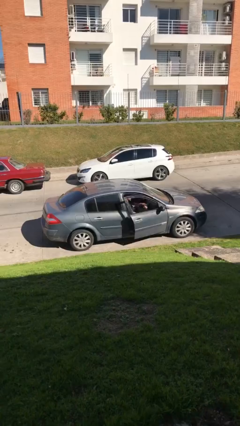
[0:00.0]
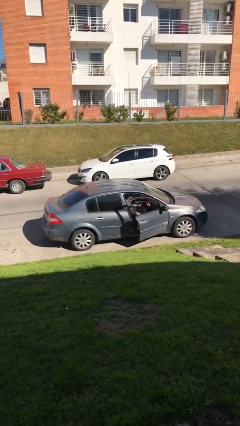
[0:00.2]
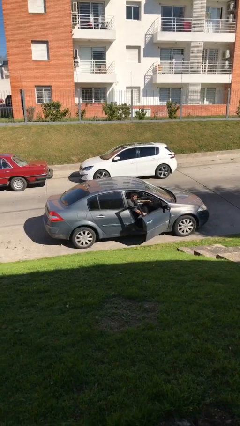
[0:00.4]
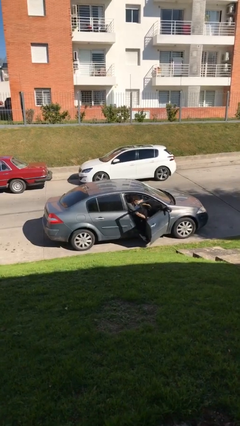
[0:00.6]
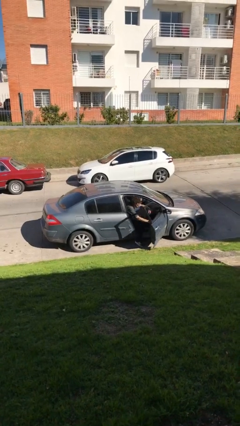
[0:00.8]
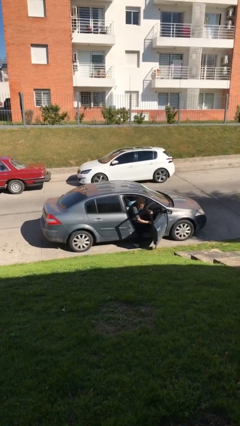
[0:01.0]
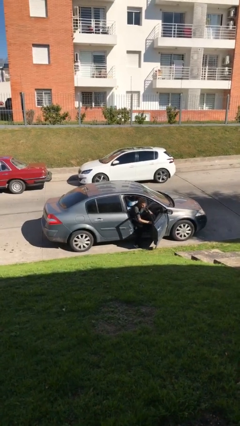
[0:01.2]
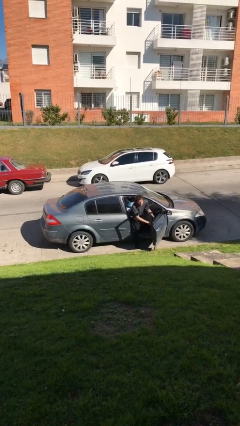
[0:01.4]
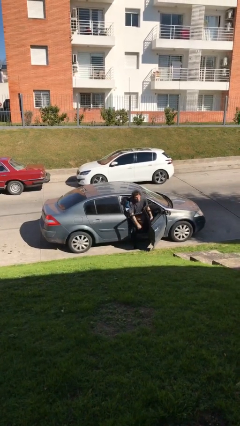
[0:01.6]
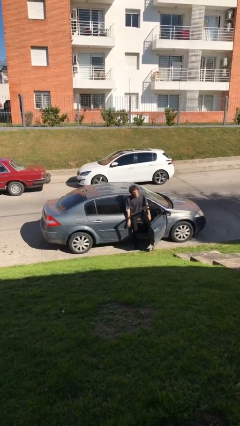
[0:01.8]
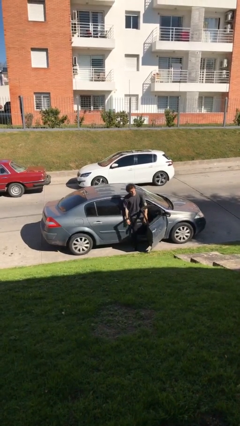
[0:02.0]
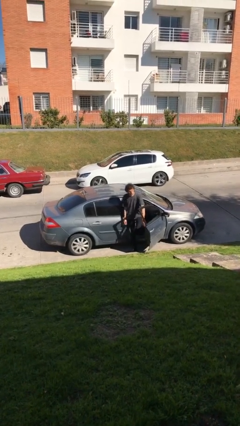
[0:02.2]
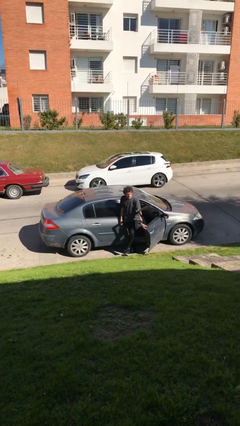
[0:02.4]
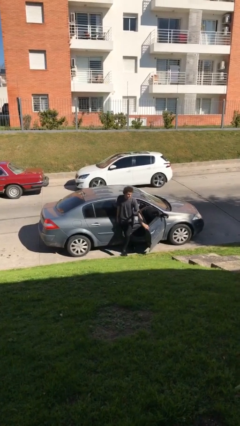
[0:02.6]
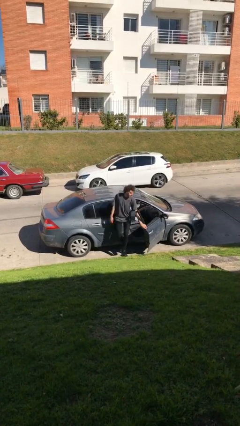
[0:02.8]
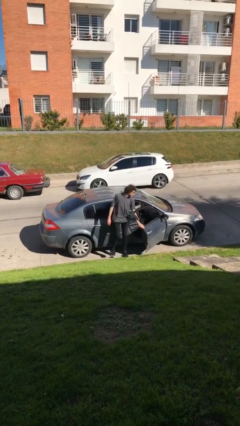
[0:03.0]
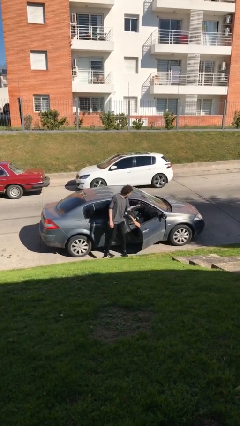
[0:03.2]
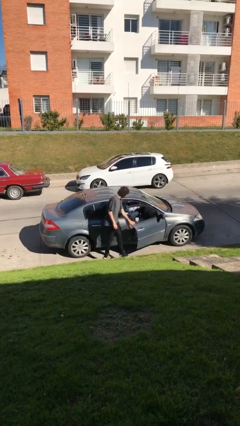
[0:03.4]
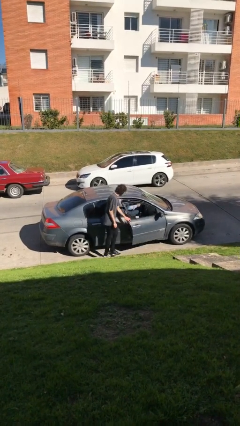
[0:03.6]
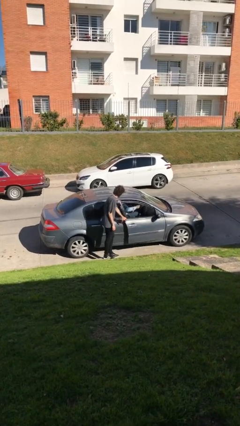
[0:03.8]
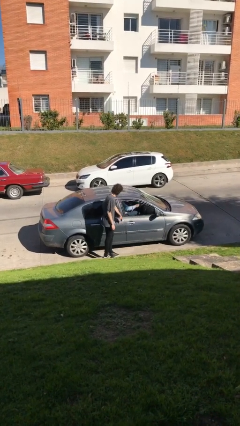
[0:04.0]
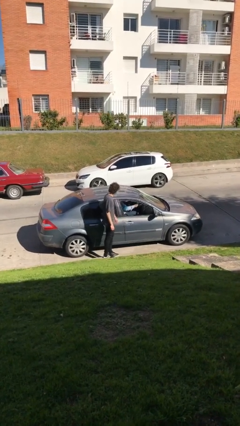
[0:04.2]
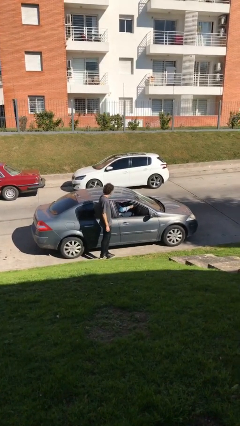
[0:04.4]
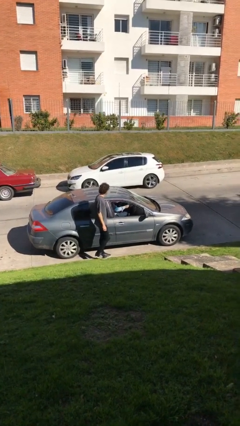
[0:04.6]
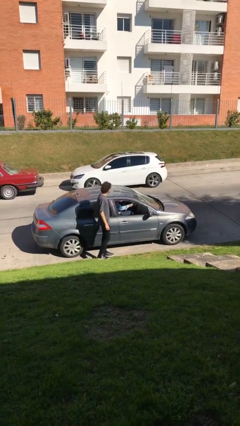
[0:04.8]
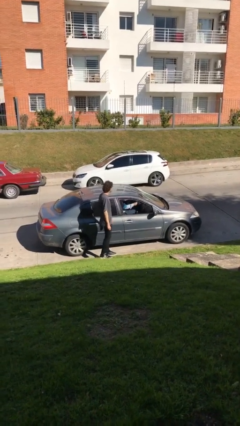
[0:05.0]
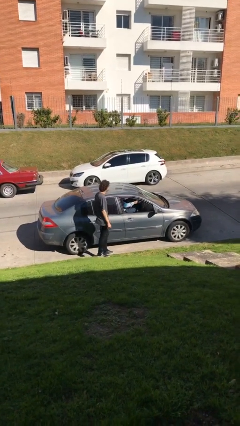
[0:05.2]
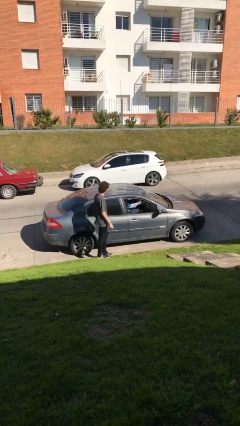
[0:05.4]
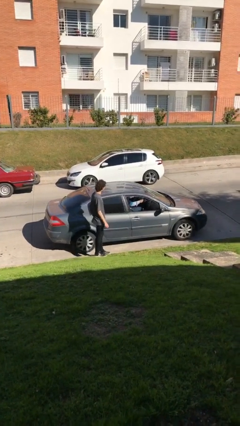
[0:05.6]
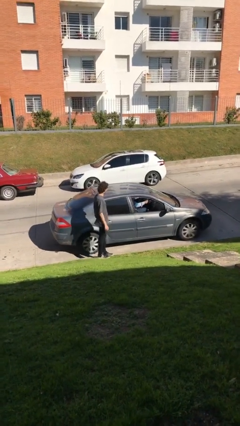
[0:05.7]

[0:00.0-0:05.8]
car drops off person

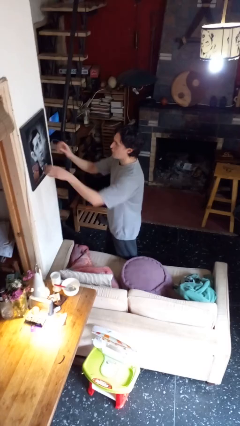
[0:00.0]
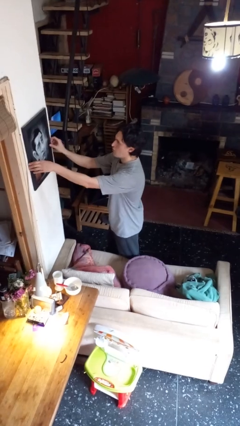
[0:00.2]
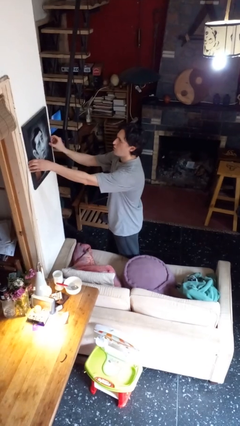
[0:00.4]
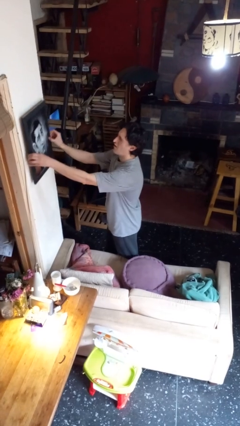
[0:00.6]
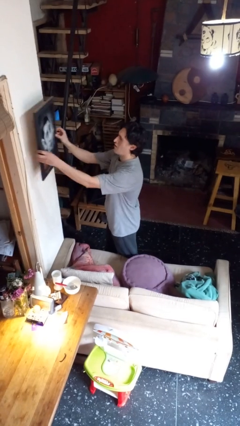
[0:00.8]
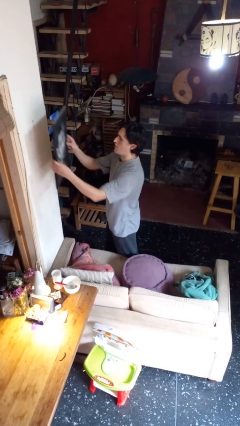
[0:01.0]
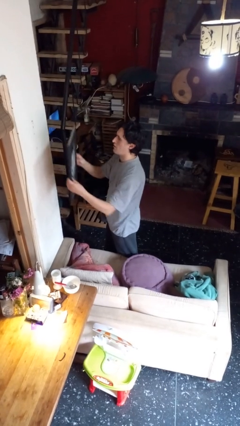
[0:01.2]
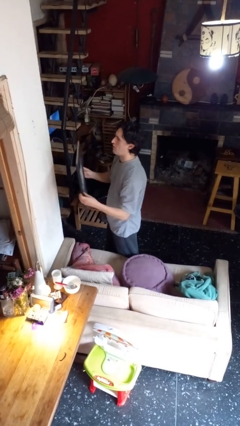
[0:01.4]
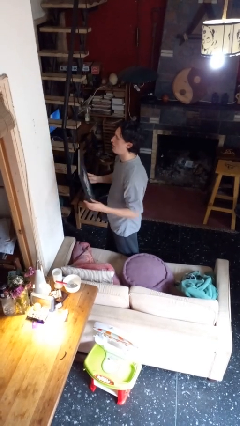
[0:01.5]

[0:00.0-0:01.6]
person takes down picture frame

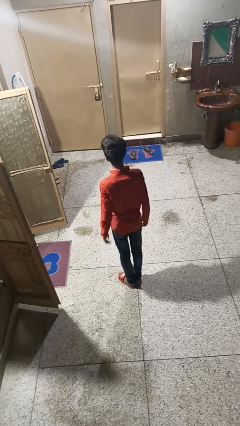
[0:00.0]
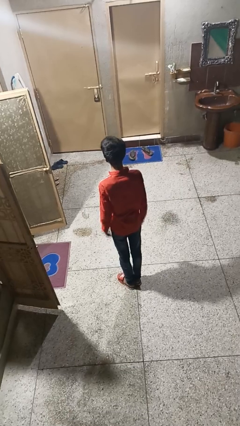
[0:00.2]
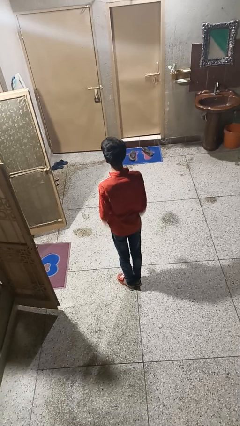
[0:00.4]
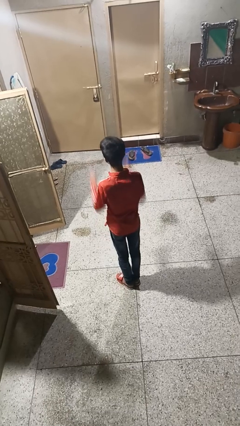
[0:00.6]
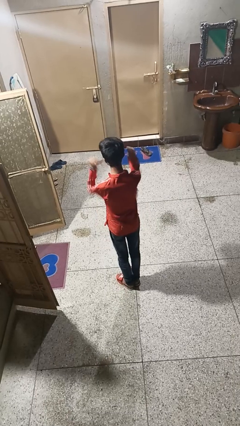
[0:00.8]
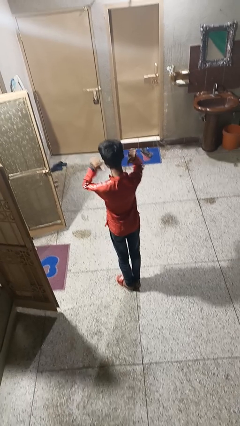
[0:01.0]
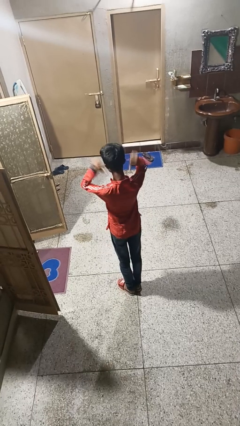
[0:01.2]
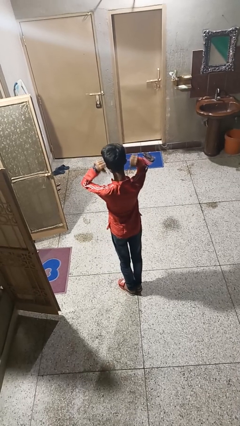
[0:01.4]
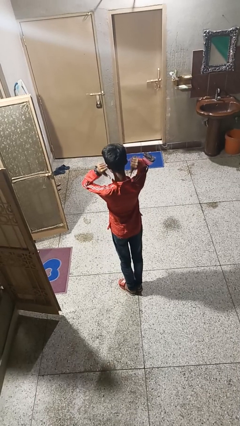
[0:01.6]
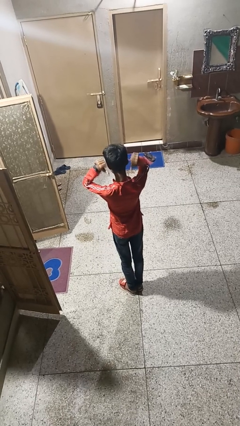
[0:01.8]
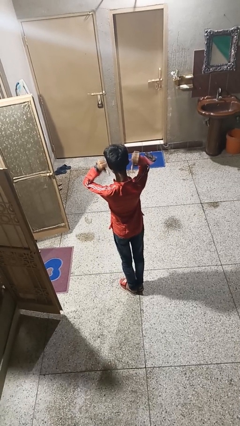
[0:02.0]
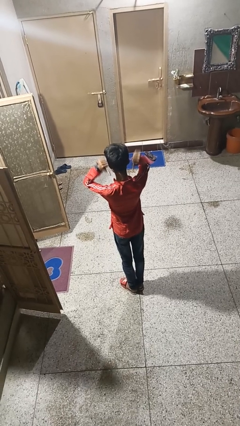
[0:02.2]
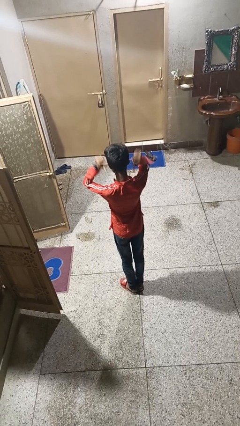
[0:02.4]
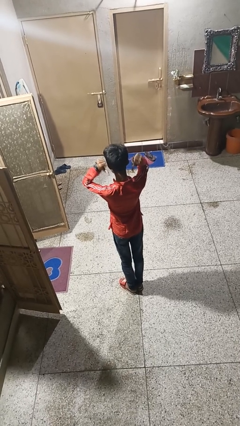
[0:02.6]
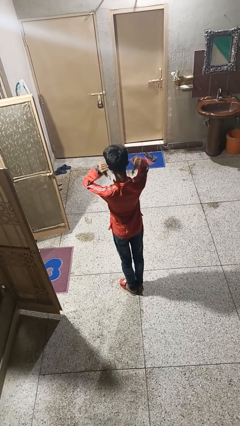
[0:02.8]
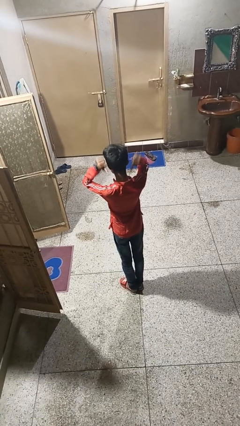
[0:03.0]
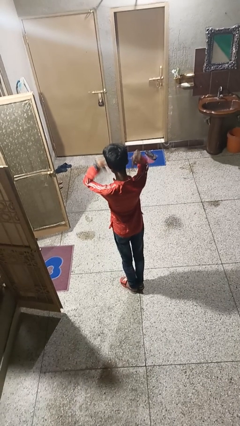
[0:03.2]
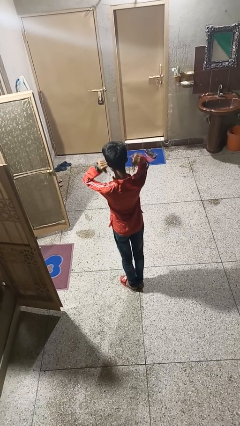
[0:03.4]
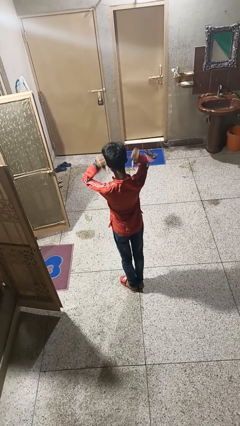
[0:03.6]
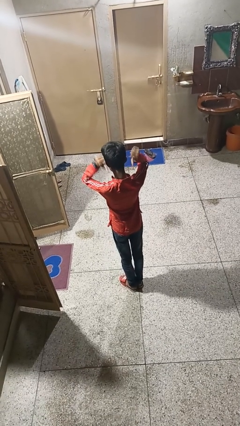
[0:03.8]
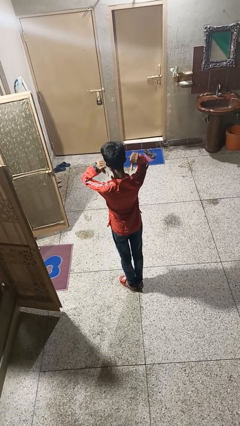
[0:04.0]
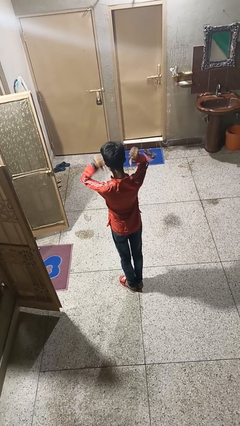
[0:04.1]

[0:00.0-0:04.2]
person gestures behind me

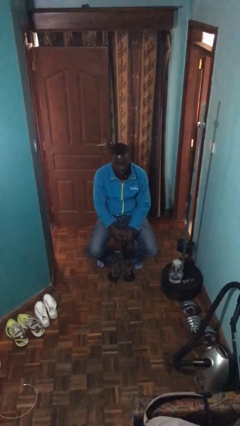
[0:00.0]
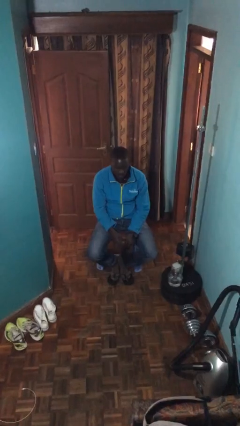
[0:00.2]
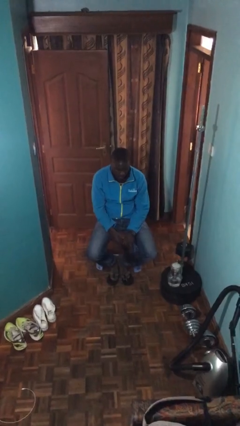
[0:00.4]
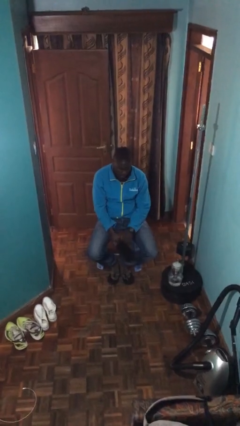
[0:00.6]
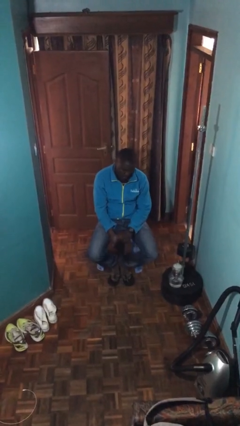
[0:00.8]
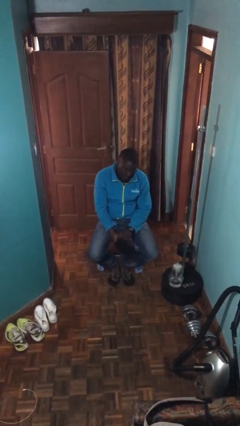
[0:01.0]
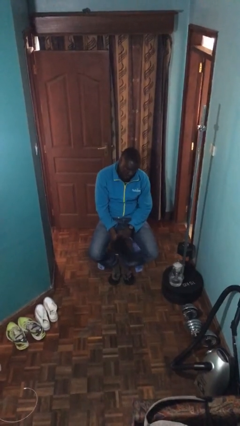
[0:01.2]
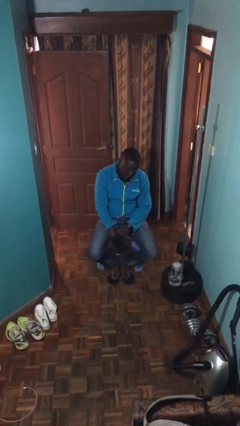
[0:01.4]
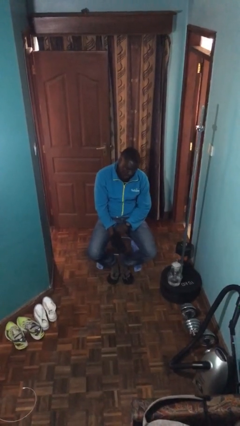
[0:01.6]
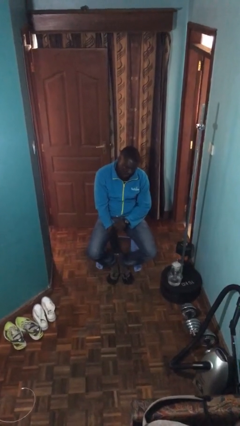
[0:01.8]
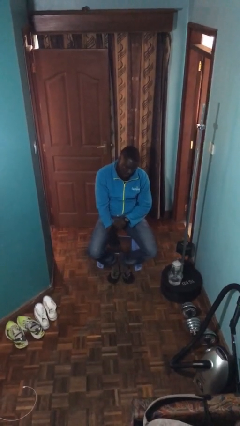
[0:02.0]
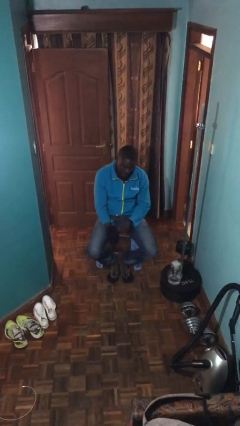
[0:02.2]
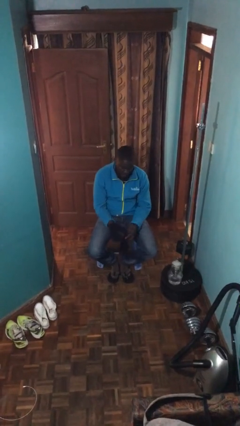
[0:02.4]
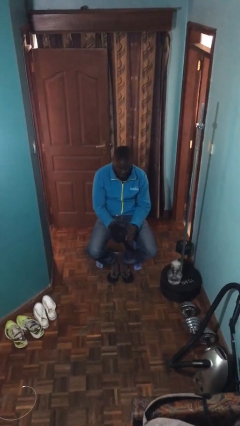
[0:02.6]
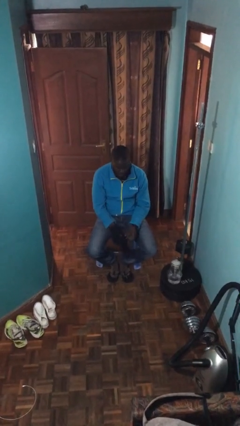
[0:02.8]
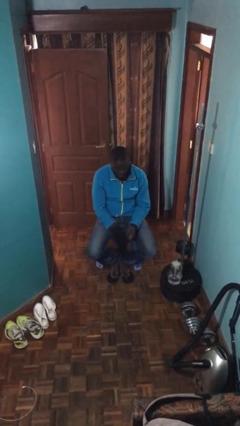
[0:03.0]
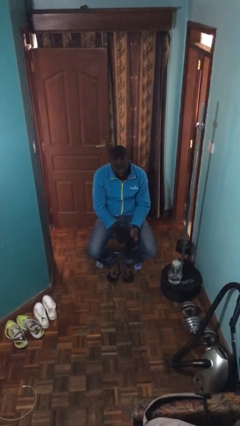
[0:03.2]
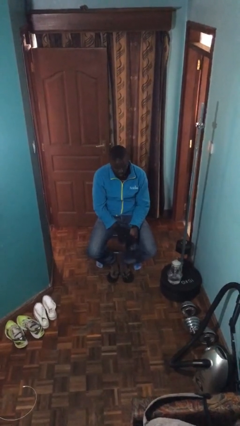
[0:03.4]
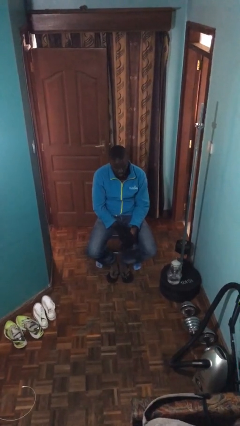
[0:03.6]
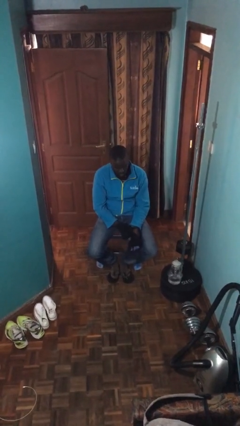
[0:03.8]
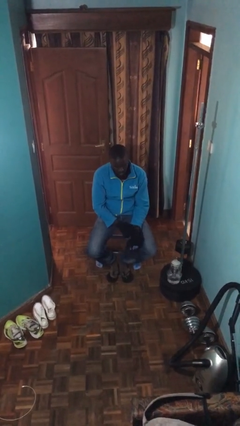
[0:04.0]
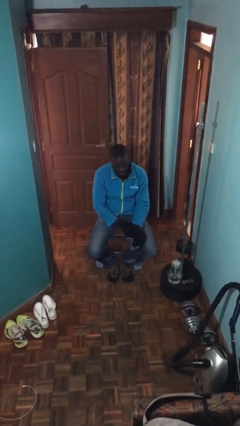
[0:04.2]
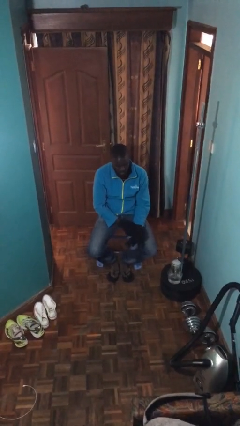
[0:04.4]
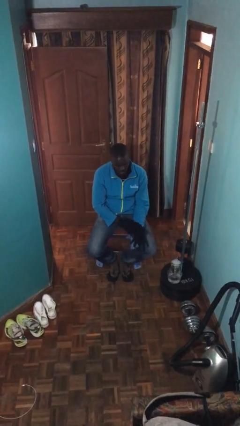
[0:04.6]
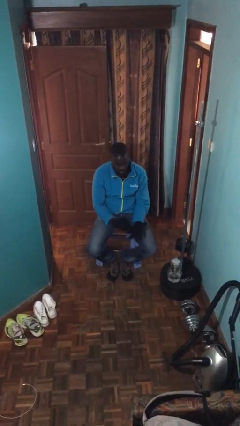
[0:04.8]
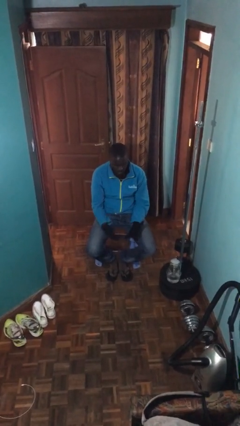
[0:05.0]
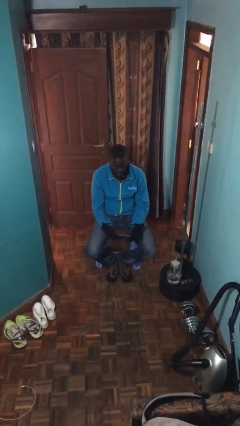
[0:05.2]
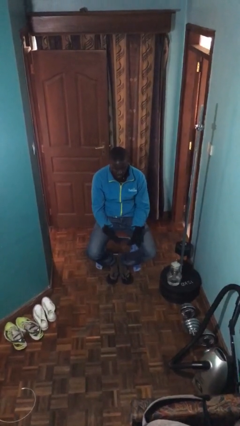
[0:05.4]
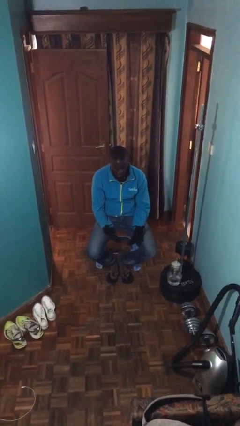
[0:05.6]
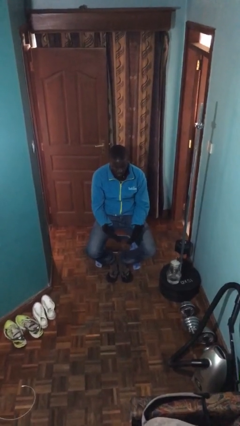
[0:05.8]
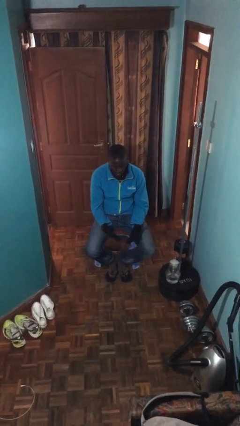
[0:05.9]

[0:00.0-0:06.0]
person puts on gloves

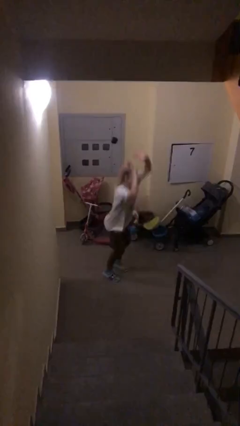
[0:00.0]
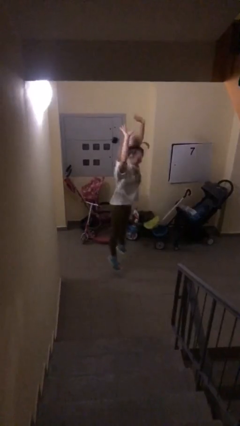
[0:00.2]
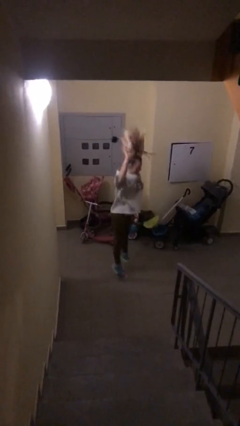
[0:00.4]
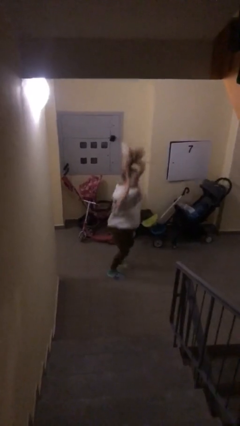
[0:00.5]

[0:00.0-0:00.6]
person jumps
